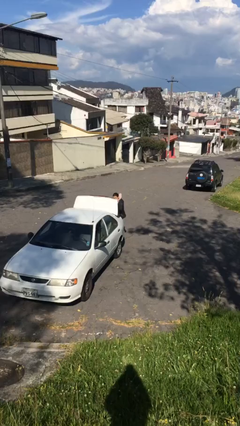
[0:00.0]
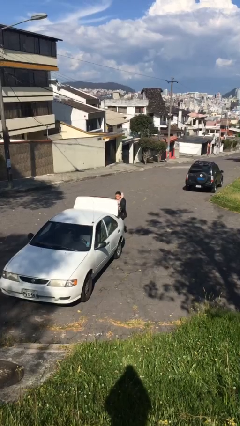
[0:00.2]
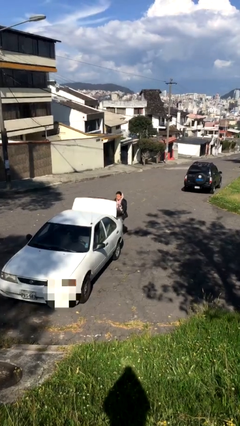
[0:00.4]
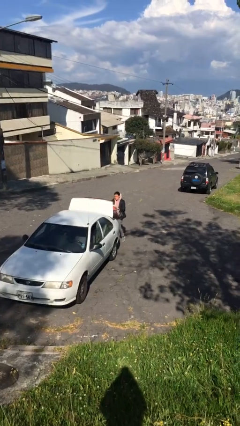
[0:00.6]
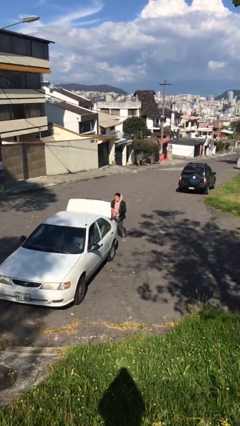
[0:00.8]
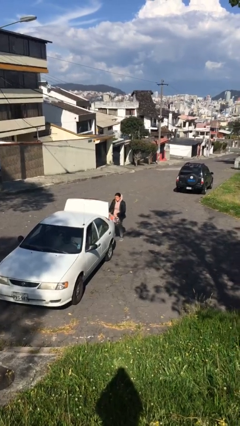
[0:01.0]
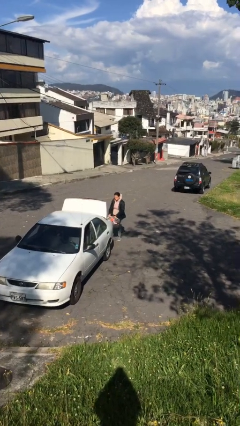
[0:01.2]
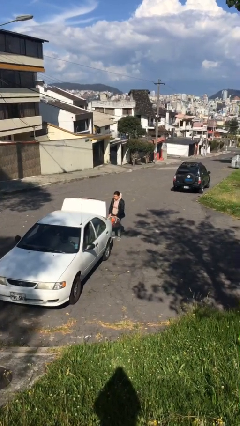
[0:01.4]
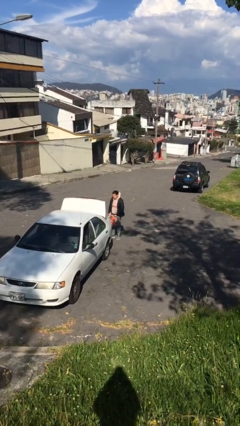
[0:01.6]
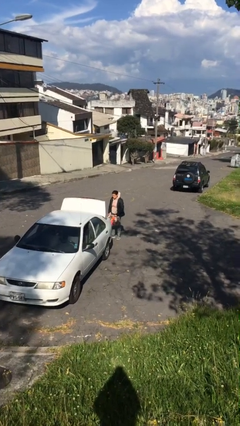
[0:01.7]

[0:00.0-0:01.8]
person unloads car

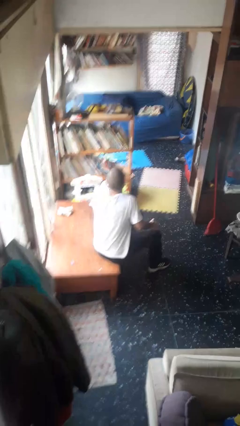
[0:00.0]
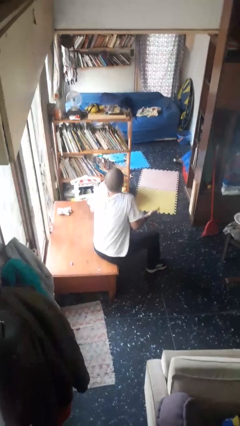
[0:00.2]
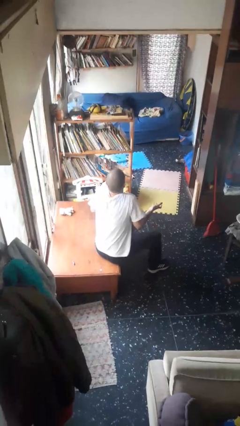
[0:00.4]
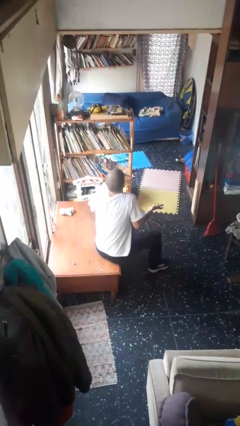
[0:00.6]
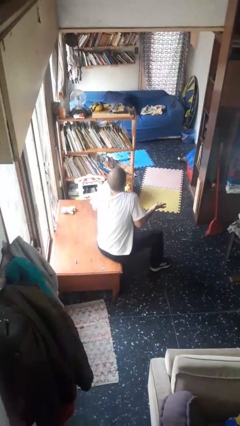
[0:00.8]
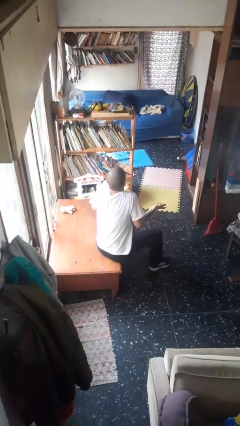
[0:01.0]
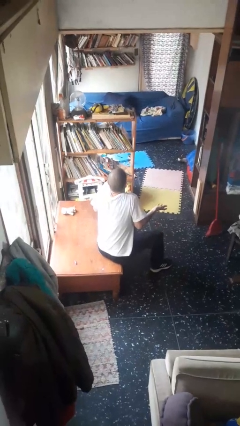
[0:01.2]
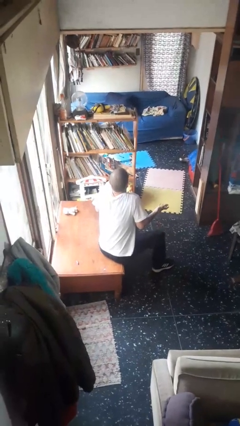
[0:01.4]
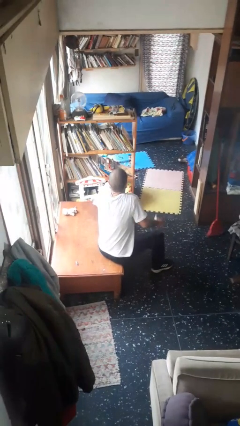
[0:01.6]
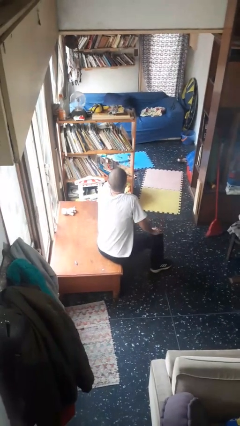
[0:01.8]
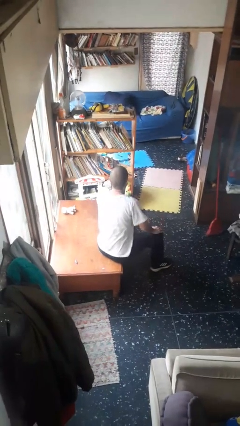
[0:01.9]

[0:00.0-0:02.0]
person shrugs

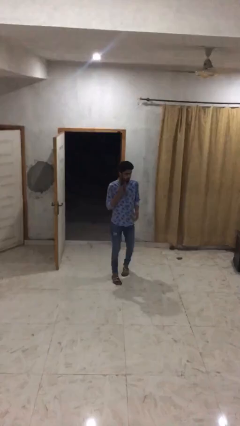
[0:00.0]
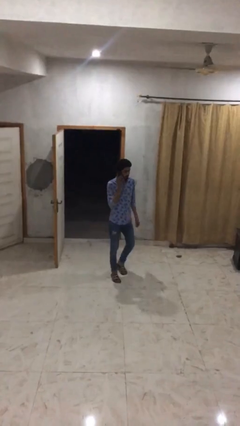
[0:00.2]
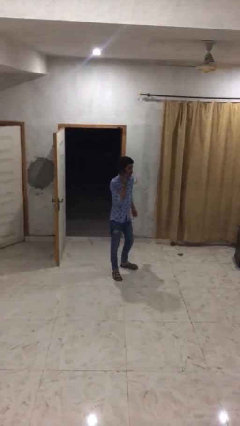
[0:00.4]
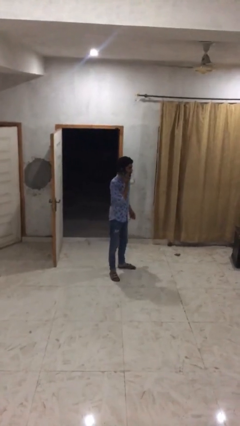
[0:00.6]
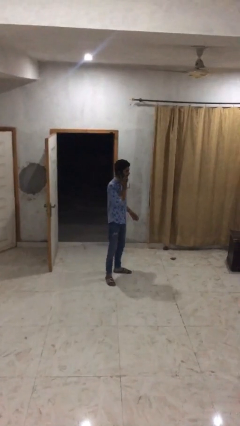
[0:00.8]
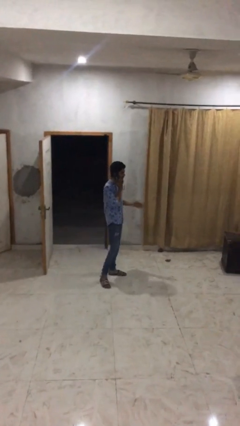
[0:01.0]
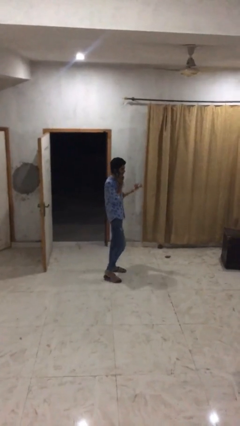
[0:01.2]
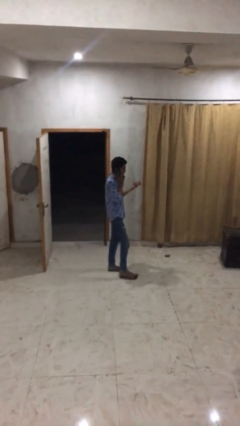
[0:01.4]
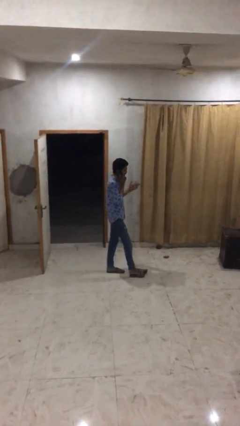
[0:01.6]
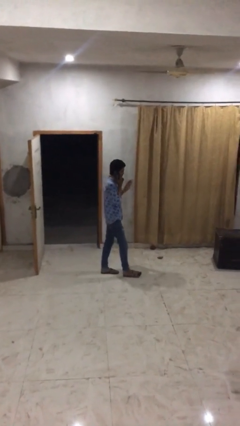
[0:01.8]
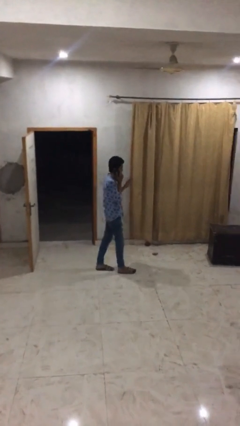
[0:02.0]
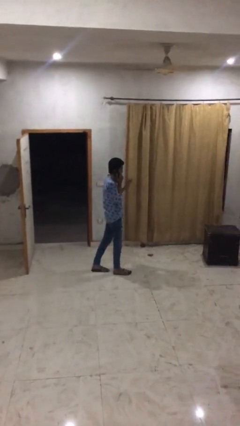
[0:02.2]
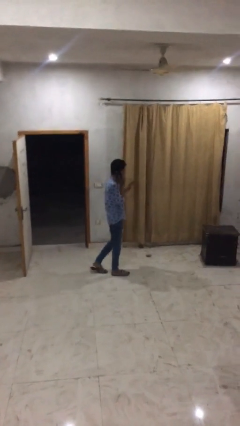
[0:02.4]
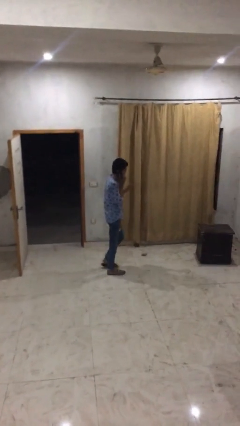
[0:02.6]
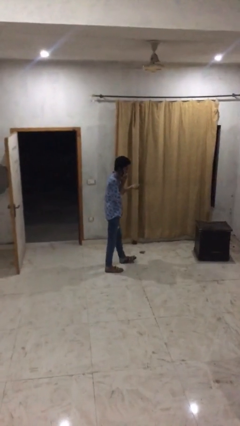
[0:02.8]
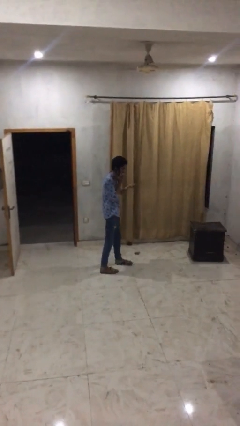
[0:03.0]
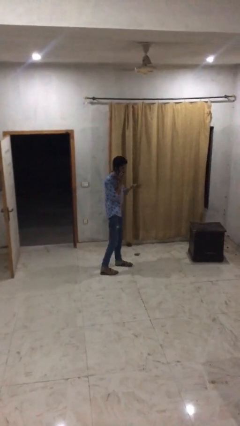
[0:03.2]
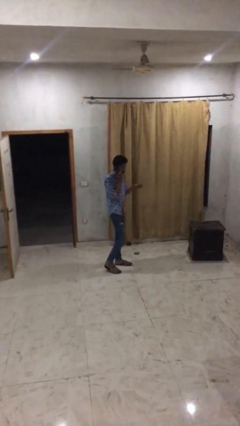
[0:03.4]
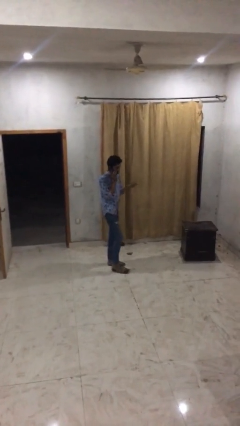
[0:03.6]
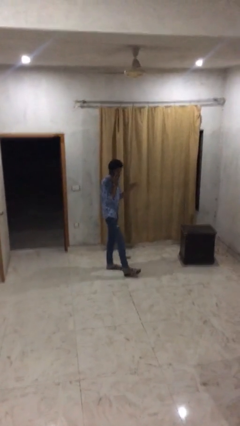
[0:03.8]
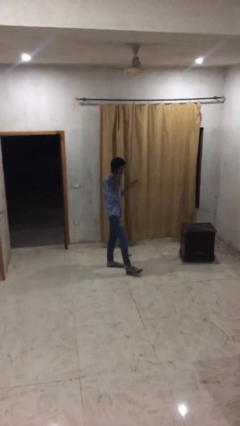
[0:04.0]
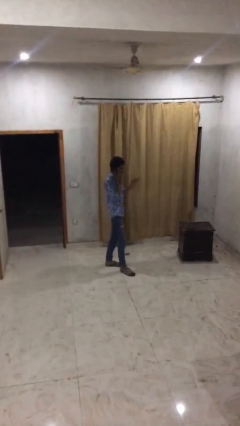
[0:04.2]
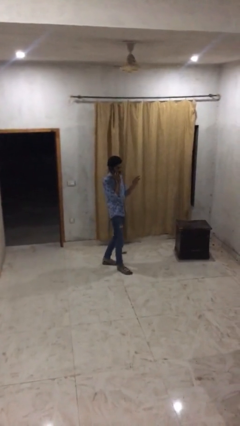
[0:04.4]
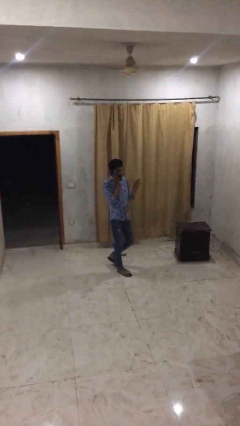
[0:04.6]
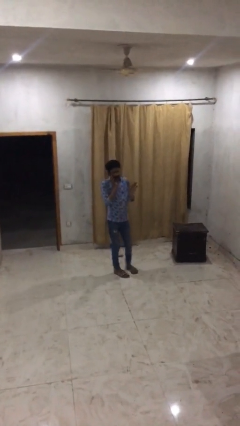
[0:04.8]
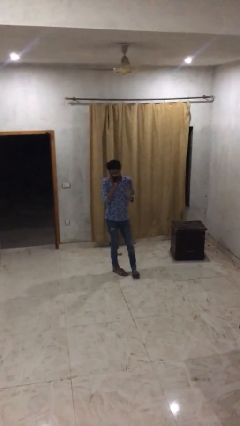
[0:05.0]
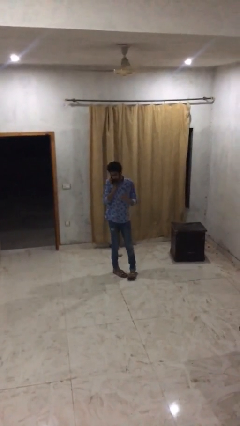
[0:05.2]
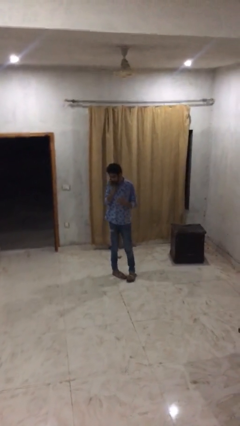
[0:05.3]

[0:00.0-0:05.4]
person talks on phone

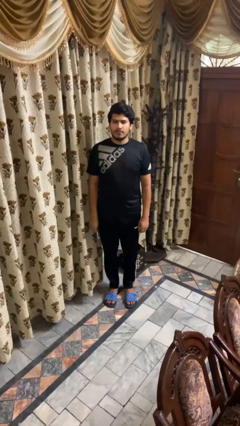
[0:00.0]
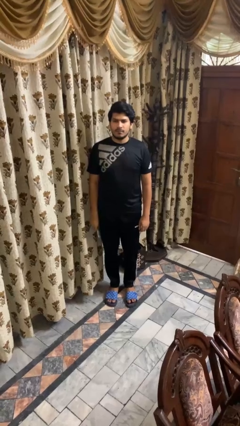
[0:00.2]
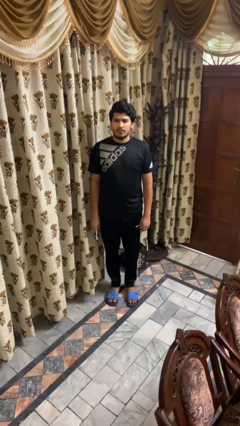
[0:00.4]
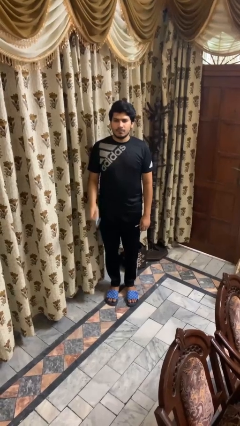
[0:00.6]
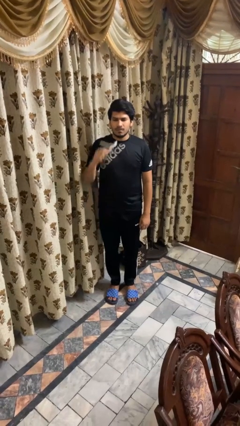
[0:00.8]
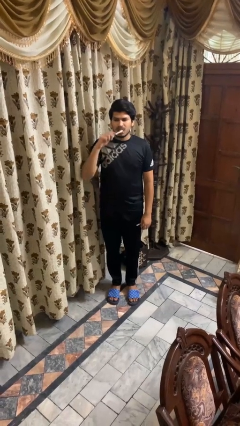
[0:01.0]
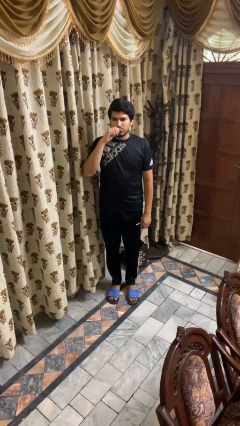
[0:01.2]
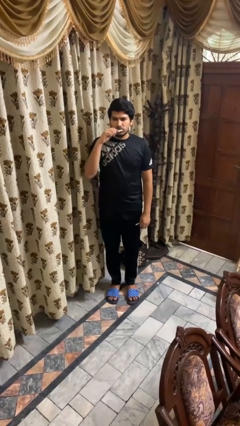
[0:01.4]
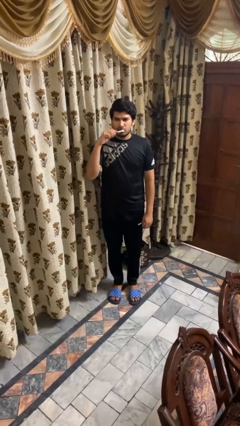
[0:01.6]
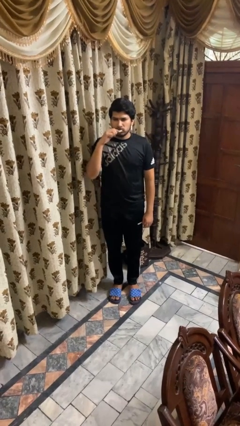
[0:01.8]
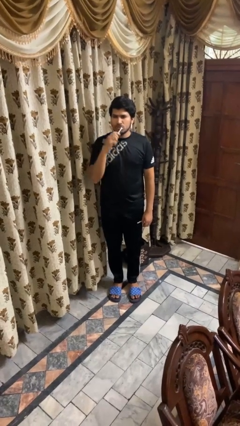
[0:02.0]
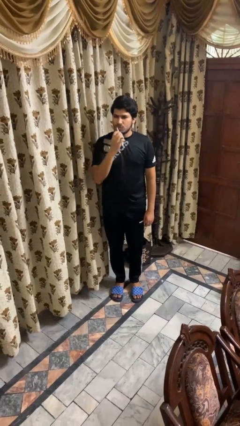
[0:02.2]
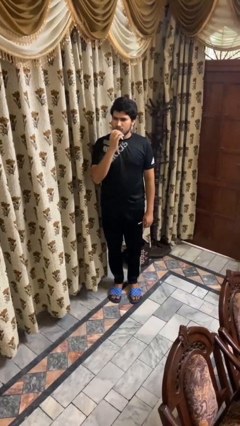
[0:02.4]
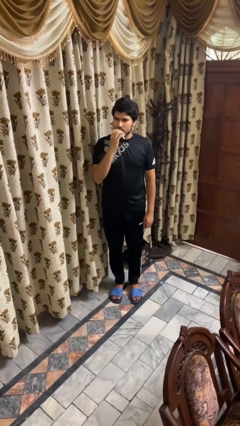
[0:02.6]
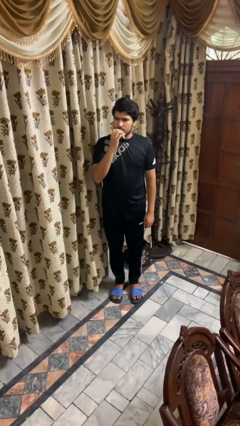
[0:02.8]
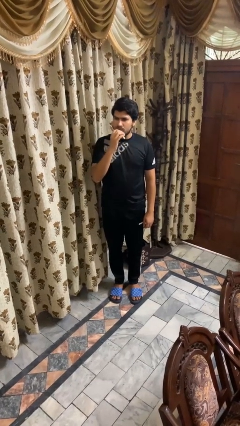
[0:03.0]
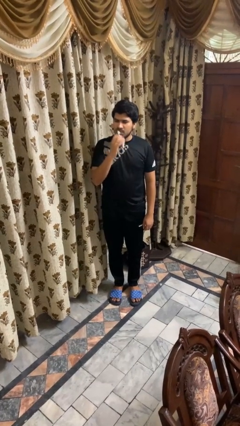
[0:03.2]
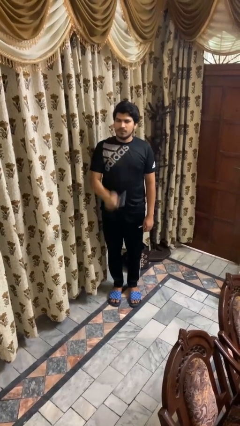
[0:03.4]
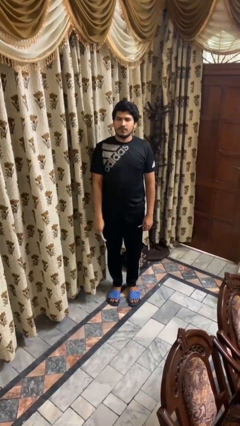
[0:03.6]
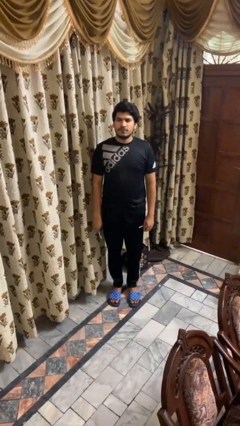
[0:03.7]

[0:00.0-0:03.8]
person brushes teeth

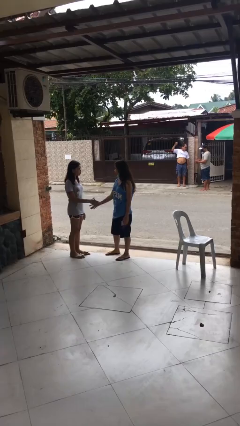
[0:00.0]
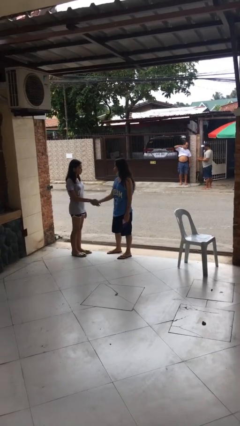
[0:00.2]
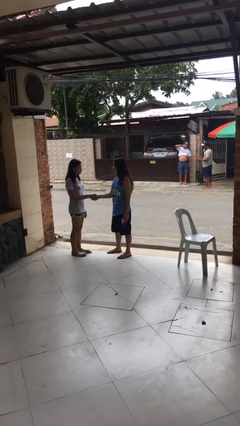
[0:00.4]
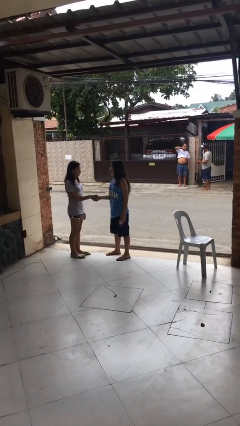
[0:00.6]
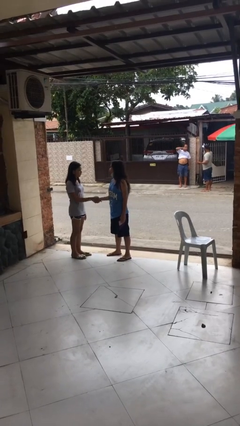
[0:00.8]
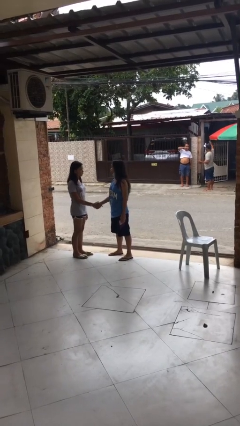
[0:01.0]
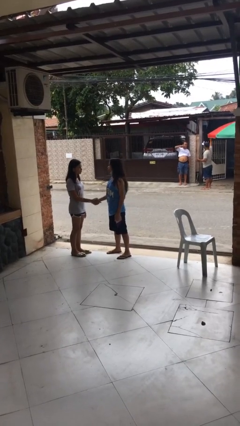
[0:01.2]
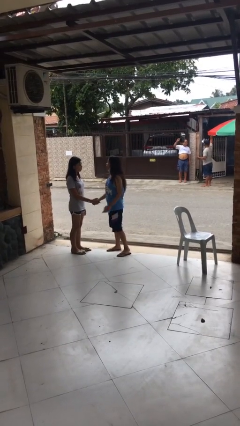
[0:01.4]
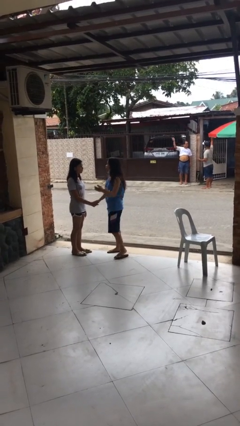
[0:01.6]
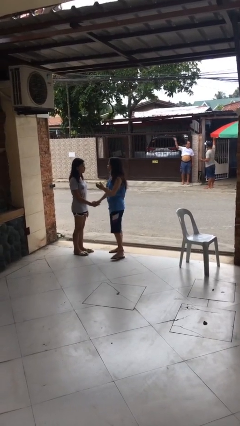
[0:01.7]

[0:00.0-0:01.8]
person shakes hand

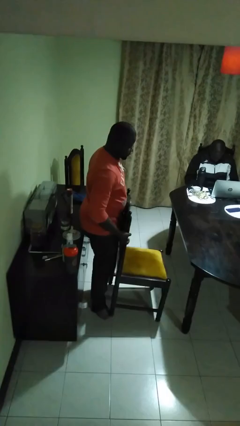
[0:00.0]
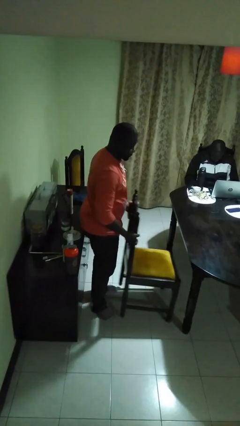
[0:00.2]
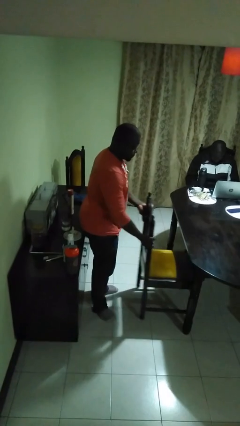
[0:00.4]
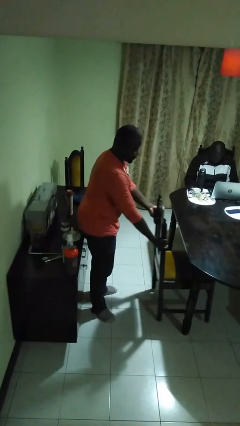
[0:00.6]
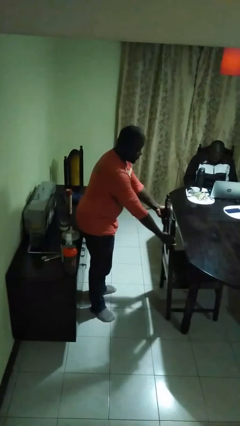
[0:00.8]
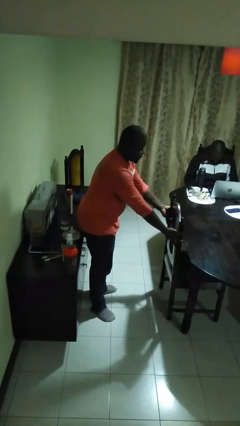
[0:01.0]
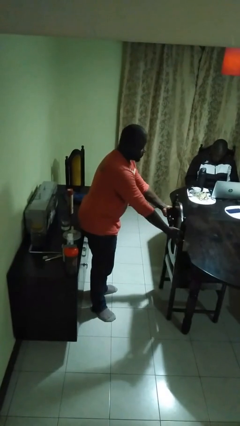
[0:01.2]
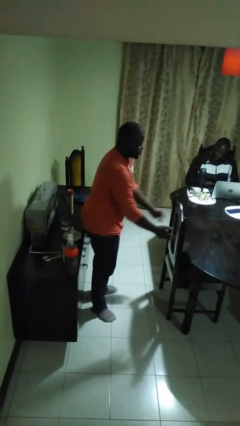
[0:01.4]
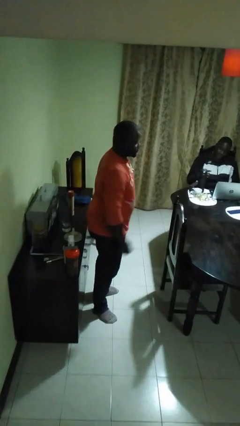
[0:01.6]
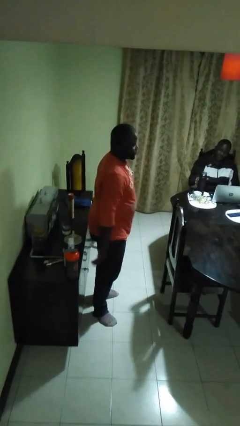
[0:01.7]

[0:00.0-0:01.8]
person pushes in chair

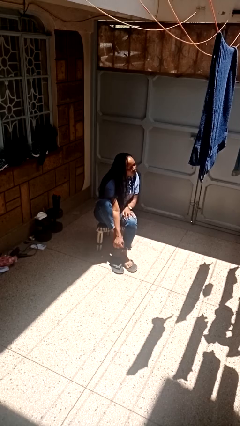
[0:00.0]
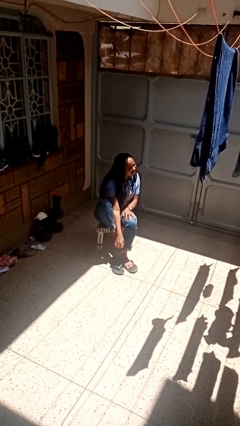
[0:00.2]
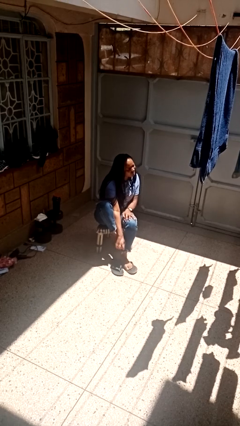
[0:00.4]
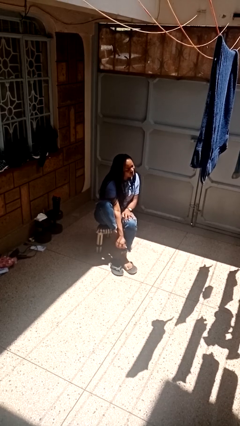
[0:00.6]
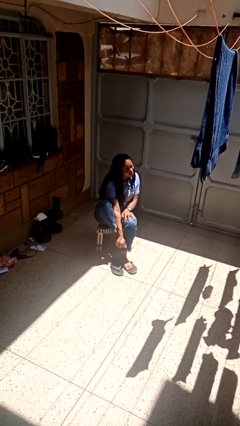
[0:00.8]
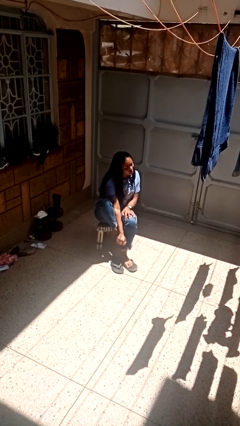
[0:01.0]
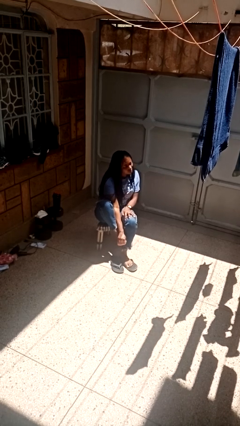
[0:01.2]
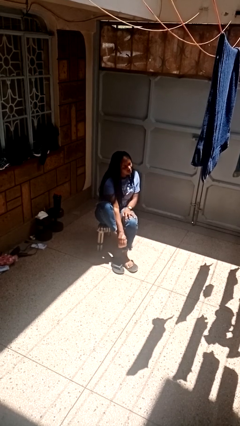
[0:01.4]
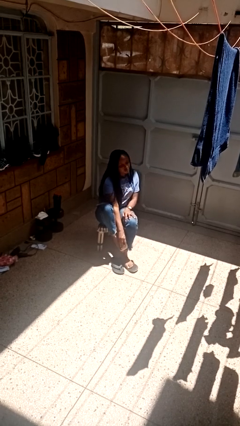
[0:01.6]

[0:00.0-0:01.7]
person rubs foot
